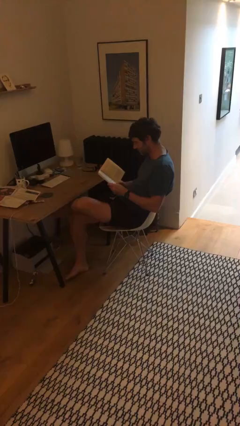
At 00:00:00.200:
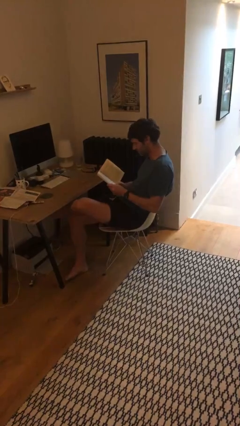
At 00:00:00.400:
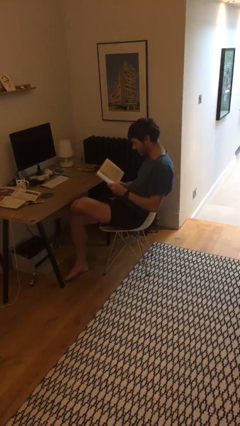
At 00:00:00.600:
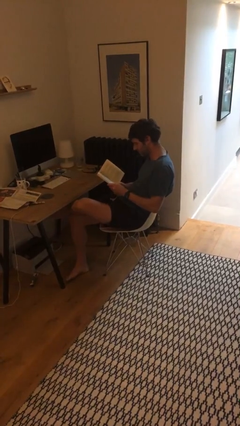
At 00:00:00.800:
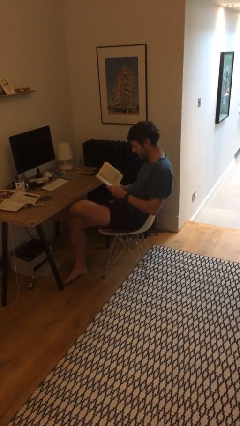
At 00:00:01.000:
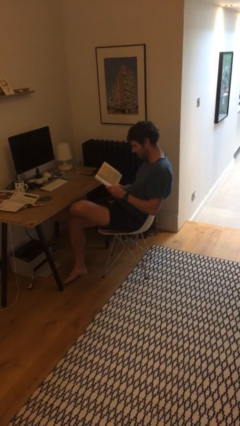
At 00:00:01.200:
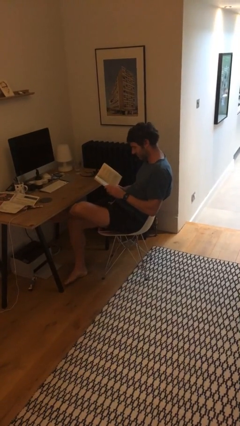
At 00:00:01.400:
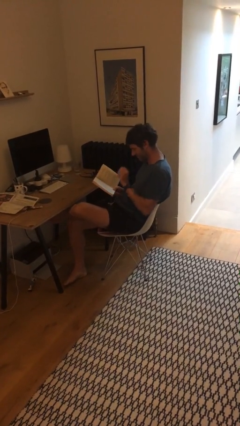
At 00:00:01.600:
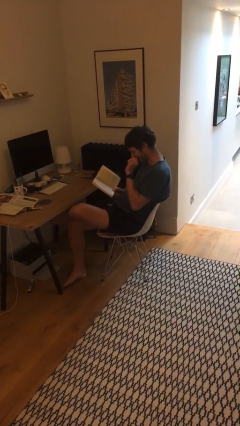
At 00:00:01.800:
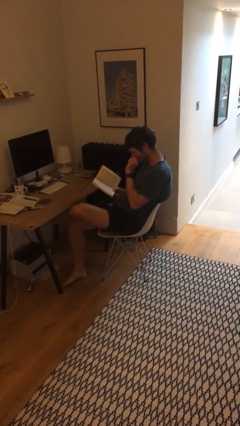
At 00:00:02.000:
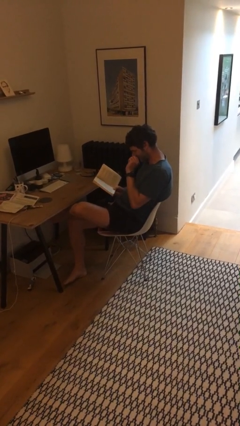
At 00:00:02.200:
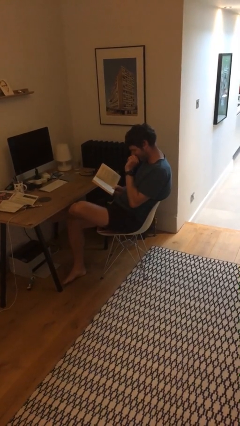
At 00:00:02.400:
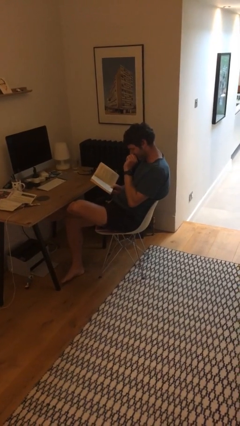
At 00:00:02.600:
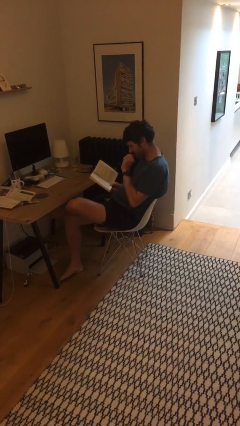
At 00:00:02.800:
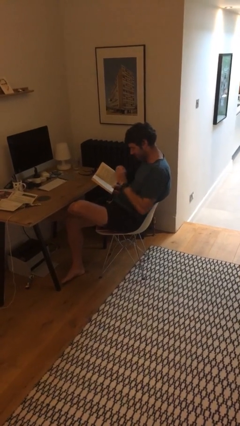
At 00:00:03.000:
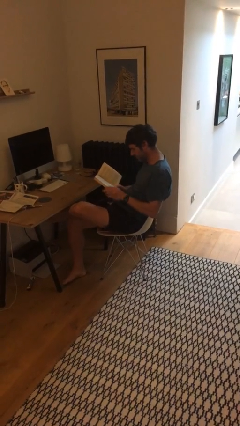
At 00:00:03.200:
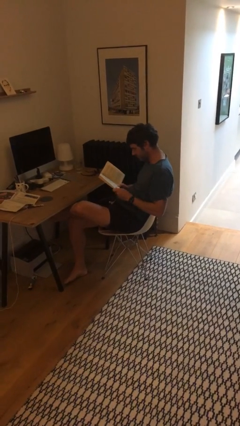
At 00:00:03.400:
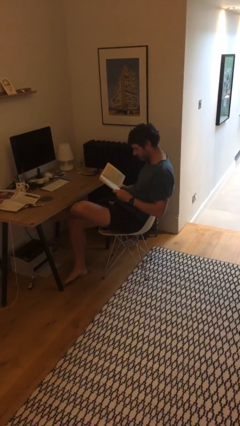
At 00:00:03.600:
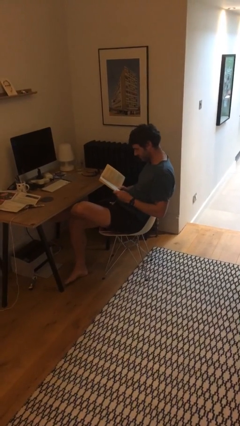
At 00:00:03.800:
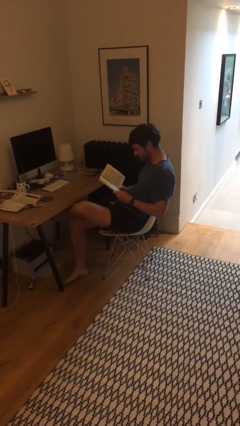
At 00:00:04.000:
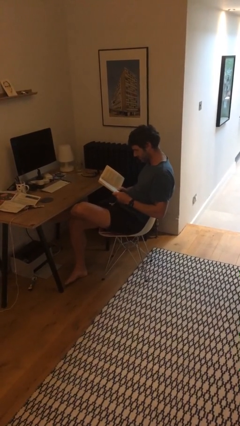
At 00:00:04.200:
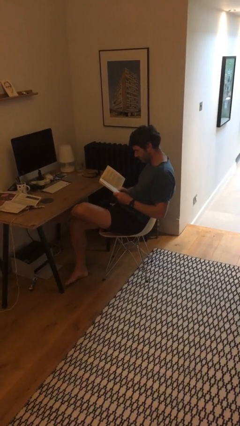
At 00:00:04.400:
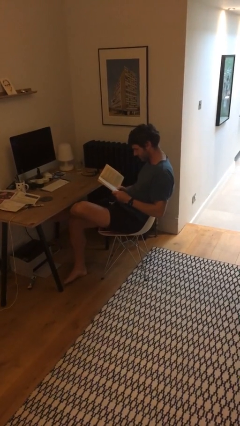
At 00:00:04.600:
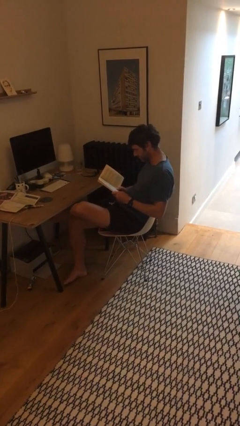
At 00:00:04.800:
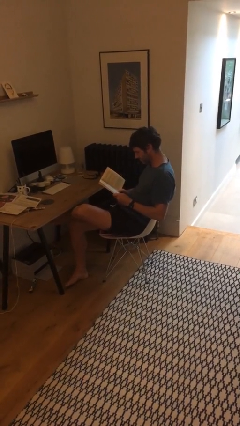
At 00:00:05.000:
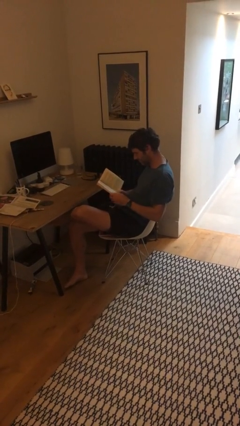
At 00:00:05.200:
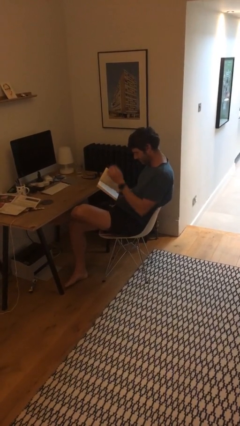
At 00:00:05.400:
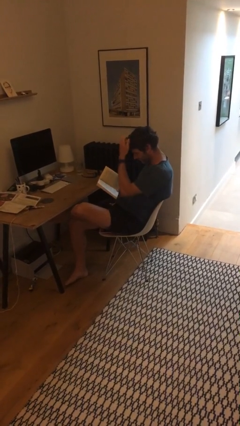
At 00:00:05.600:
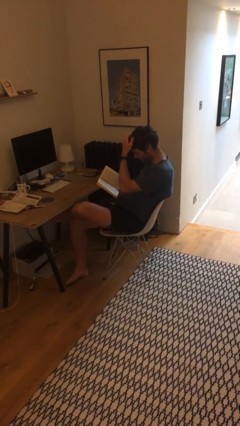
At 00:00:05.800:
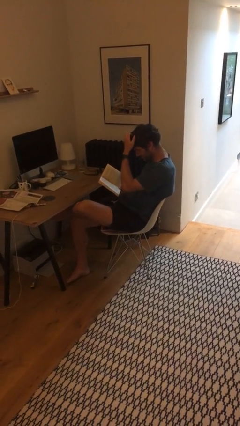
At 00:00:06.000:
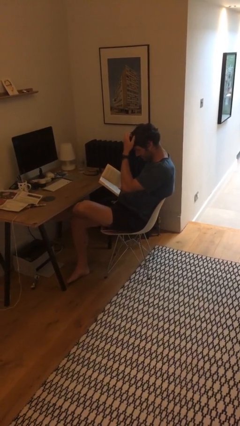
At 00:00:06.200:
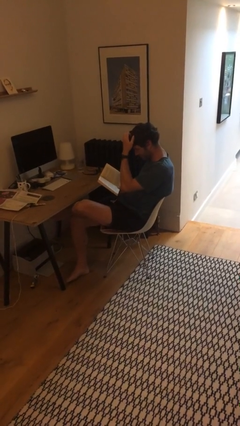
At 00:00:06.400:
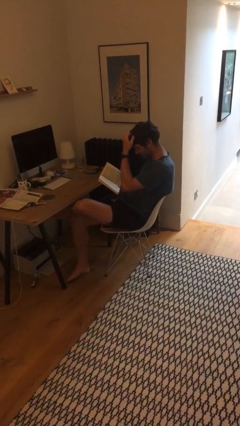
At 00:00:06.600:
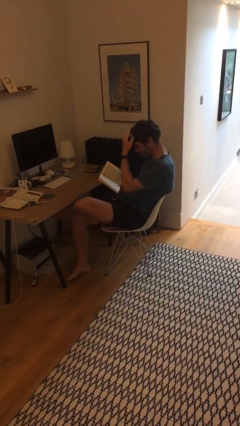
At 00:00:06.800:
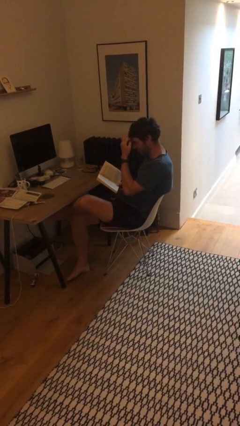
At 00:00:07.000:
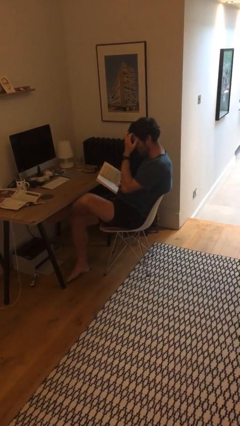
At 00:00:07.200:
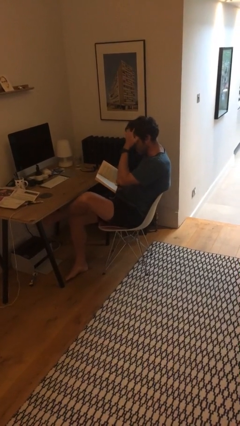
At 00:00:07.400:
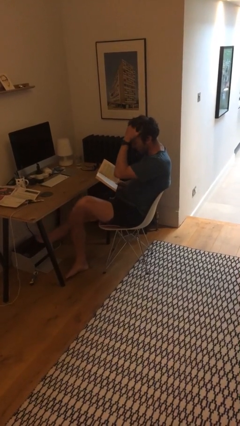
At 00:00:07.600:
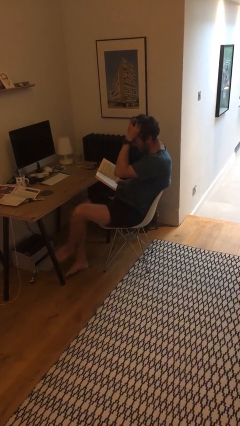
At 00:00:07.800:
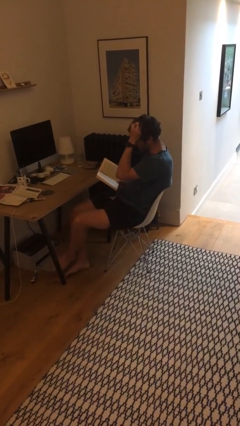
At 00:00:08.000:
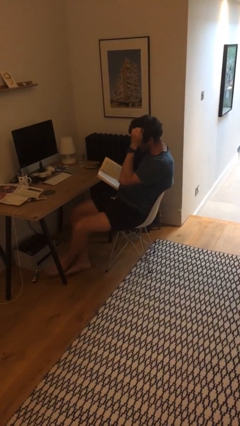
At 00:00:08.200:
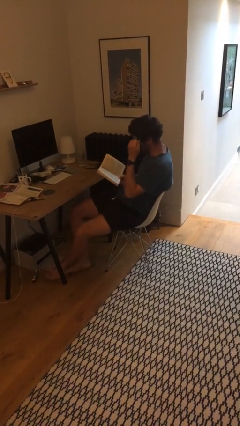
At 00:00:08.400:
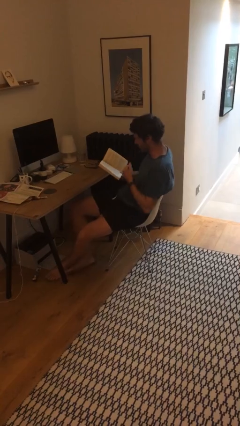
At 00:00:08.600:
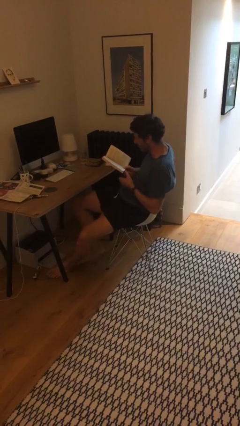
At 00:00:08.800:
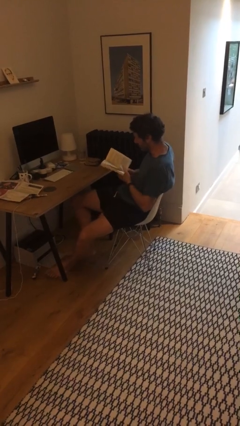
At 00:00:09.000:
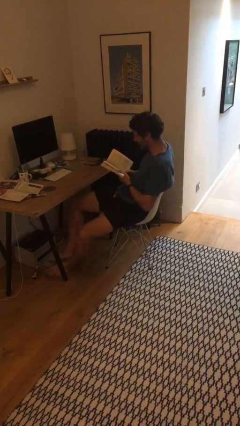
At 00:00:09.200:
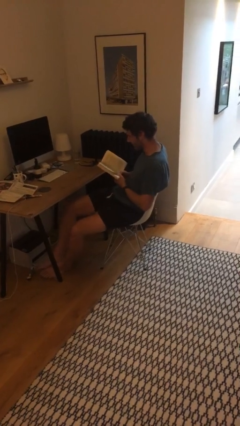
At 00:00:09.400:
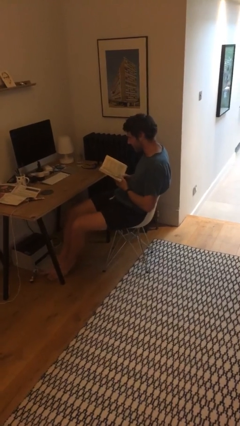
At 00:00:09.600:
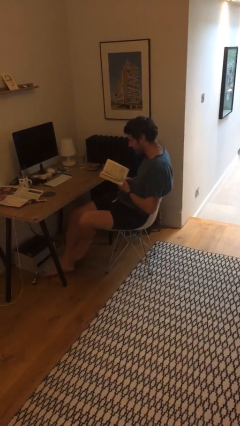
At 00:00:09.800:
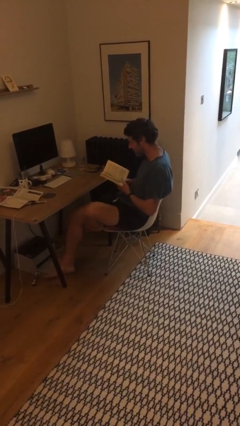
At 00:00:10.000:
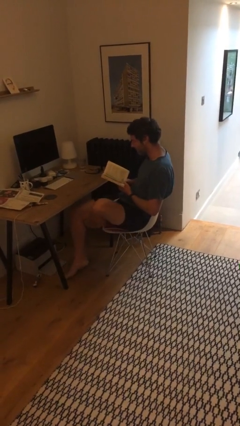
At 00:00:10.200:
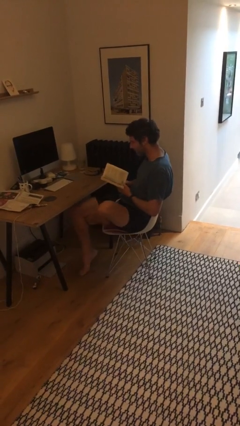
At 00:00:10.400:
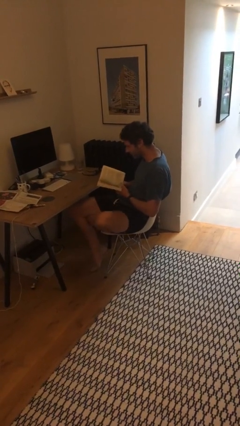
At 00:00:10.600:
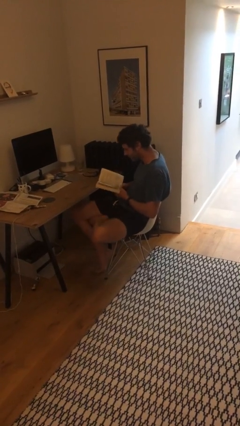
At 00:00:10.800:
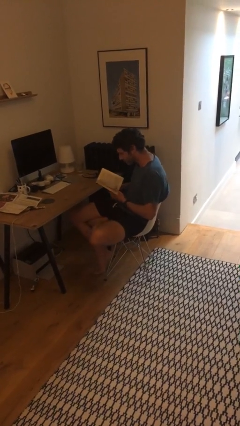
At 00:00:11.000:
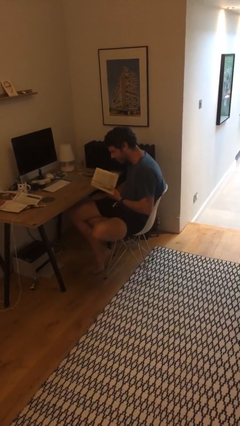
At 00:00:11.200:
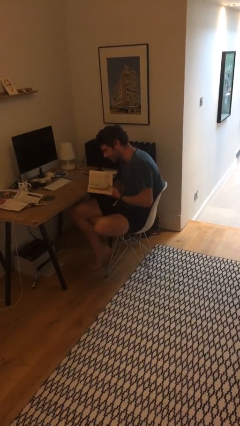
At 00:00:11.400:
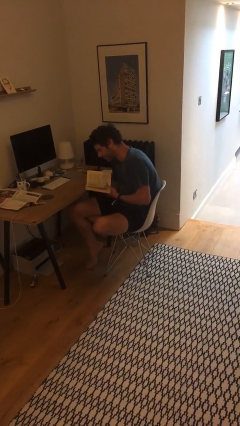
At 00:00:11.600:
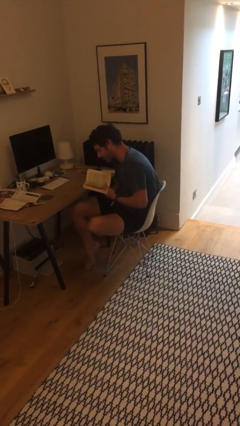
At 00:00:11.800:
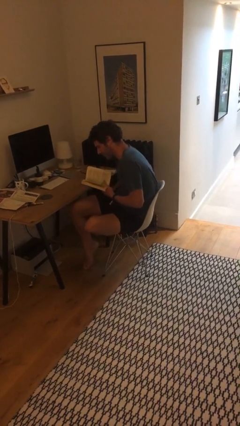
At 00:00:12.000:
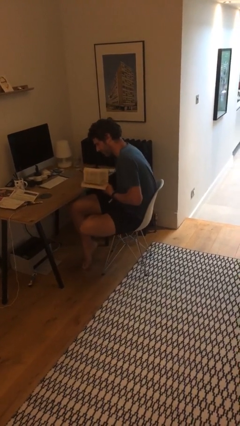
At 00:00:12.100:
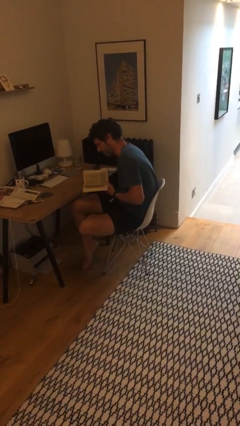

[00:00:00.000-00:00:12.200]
person reads document

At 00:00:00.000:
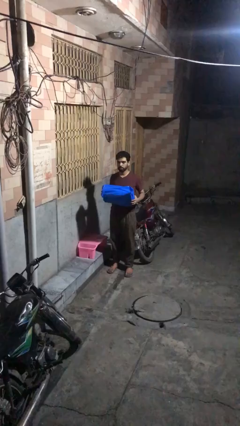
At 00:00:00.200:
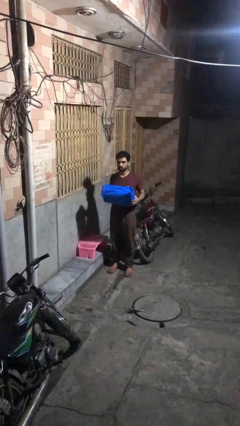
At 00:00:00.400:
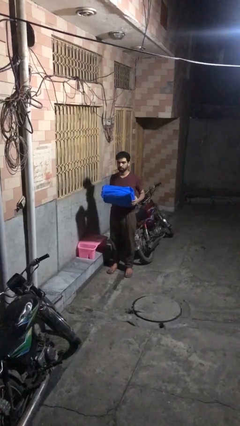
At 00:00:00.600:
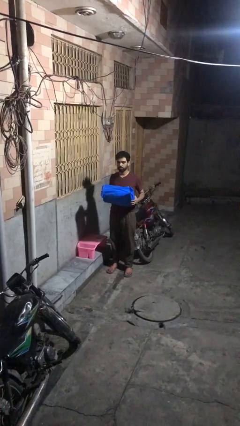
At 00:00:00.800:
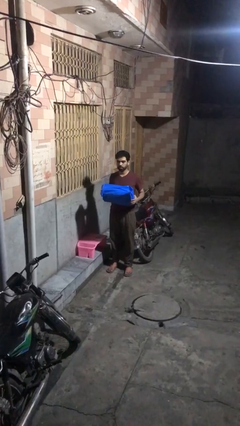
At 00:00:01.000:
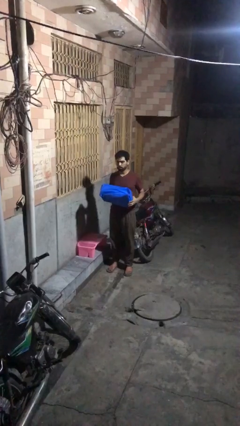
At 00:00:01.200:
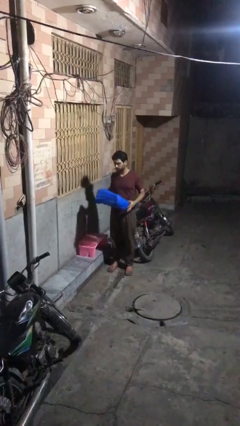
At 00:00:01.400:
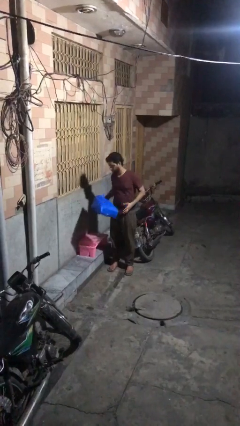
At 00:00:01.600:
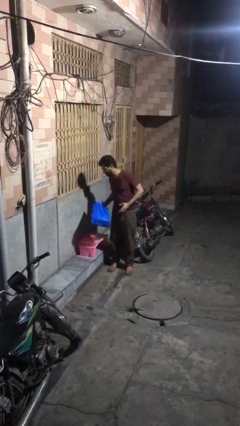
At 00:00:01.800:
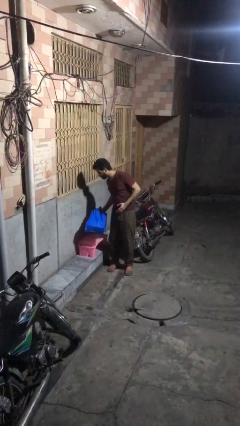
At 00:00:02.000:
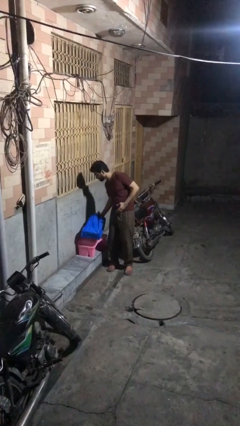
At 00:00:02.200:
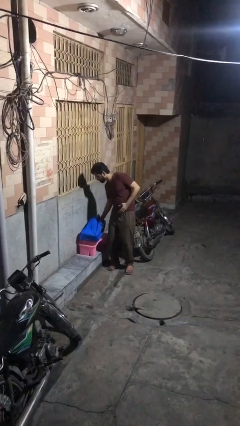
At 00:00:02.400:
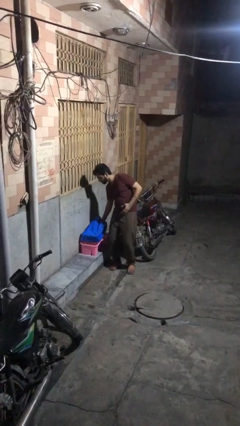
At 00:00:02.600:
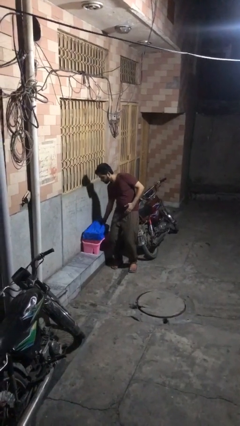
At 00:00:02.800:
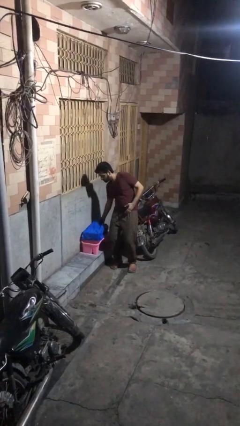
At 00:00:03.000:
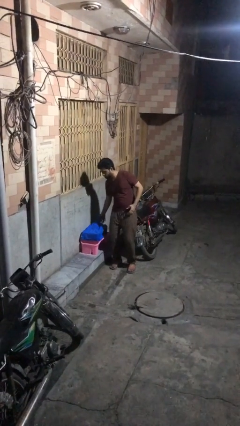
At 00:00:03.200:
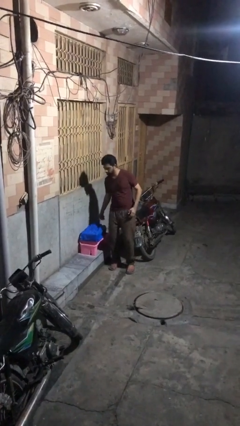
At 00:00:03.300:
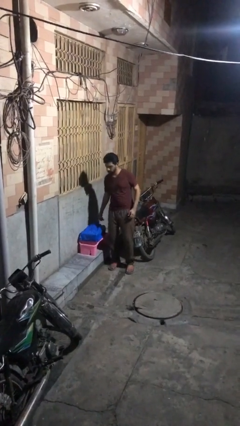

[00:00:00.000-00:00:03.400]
person puts down object on table

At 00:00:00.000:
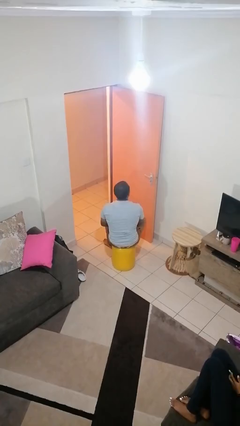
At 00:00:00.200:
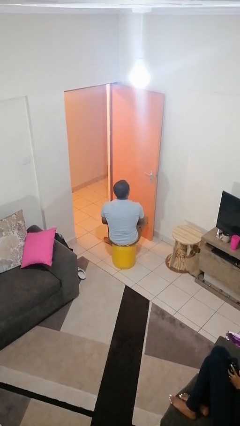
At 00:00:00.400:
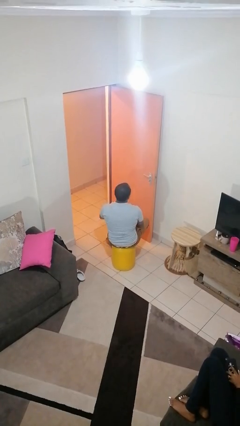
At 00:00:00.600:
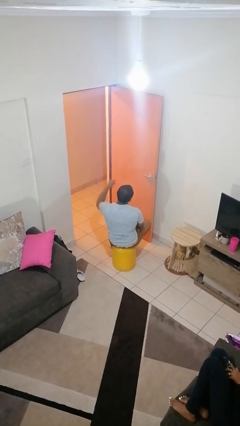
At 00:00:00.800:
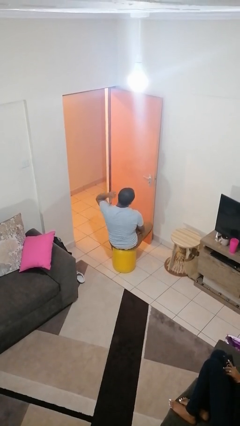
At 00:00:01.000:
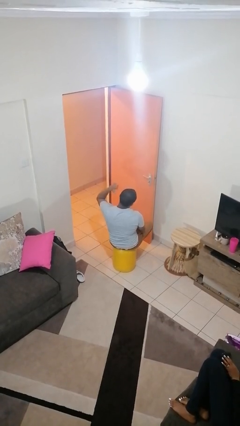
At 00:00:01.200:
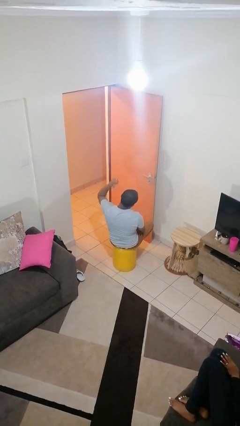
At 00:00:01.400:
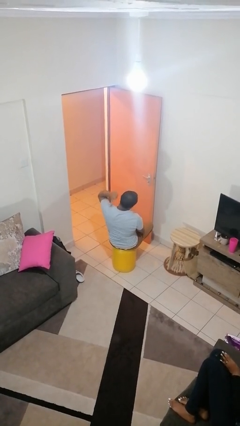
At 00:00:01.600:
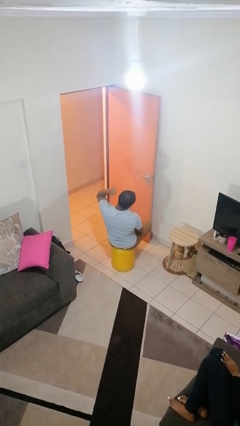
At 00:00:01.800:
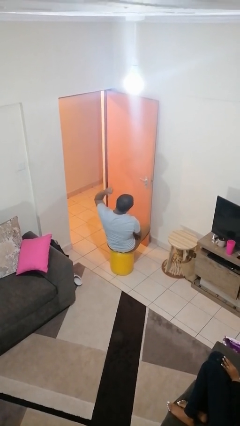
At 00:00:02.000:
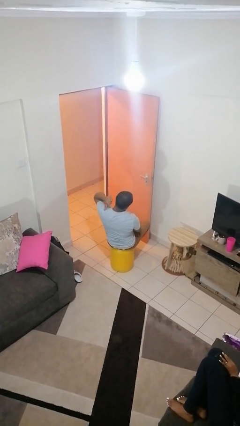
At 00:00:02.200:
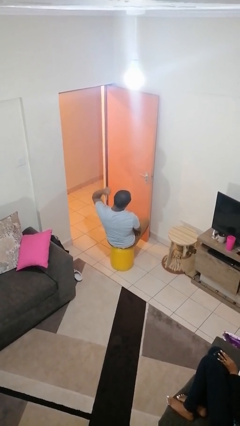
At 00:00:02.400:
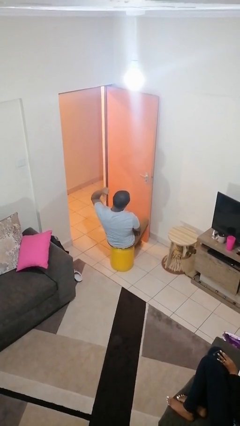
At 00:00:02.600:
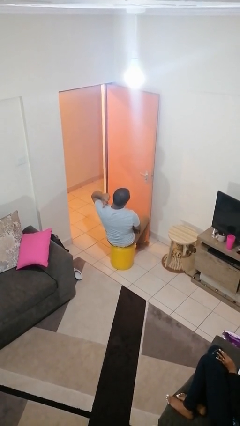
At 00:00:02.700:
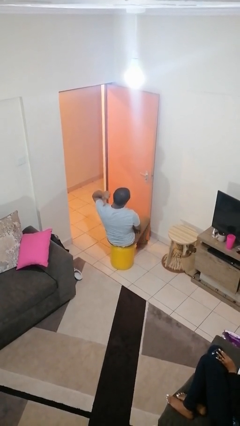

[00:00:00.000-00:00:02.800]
person gestures behind me
